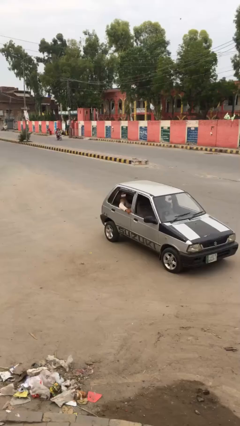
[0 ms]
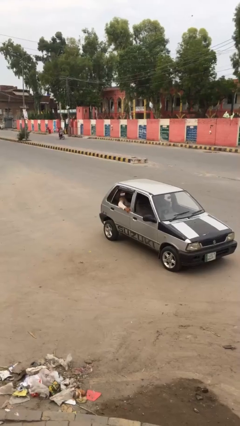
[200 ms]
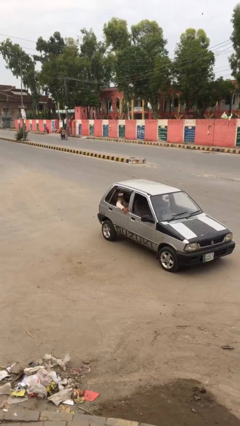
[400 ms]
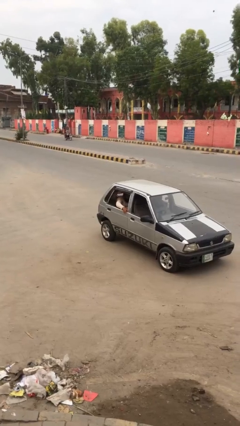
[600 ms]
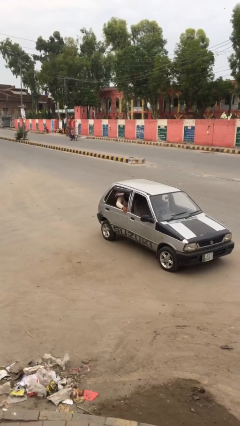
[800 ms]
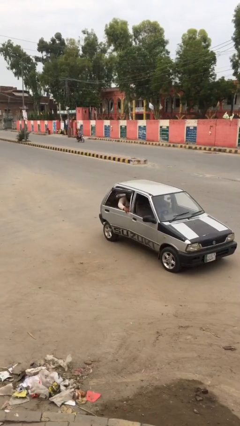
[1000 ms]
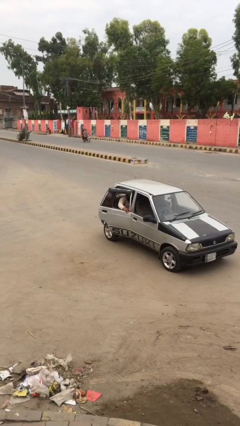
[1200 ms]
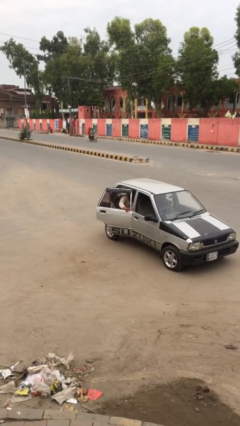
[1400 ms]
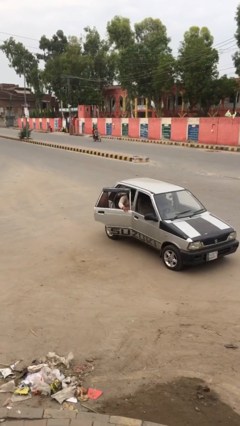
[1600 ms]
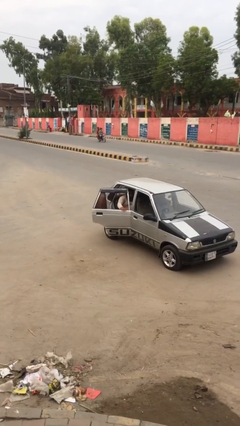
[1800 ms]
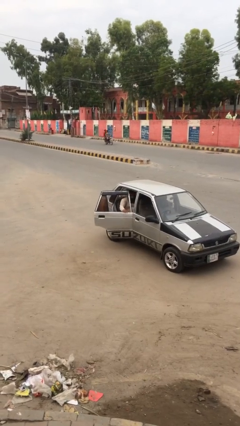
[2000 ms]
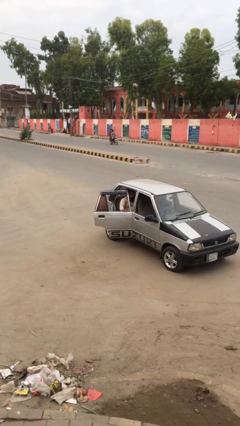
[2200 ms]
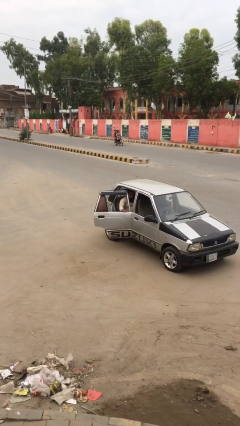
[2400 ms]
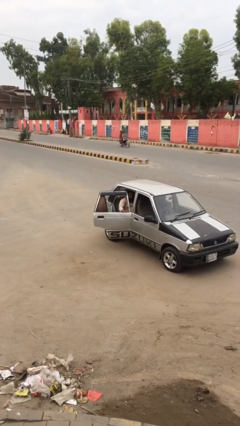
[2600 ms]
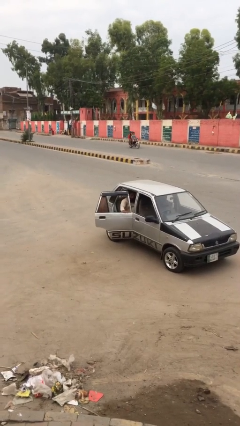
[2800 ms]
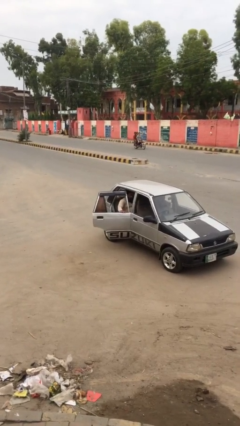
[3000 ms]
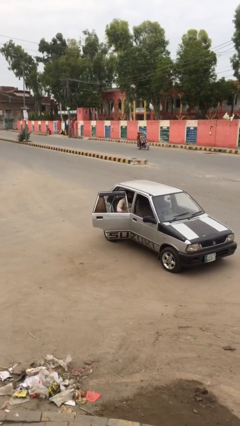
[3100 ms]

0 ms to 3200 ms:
person opens car door

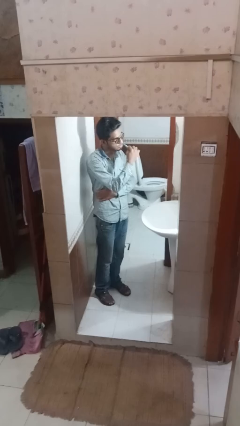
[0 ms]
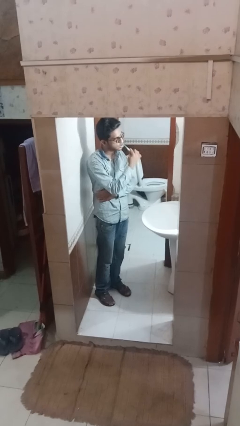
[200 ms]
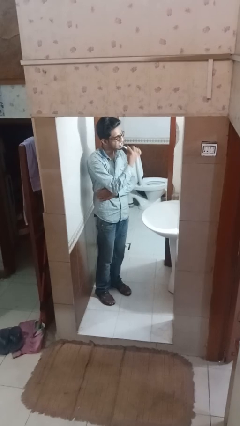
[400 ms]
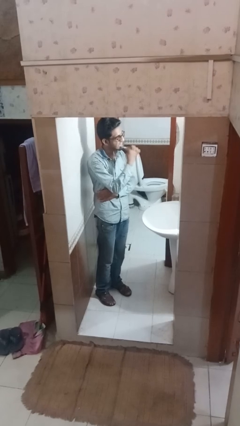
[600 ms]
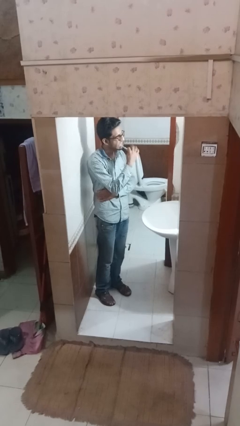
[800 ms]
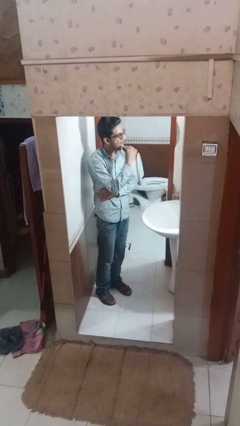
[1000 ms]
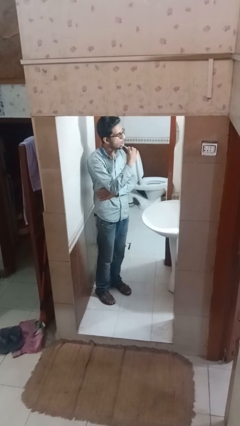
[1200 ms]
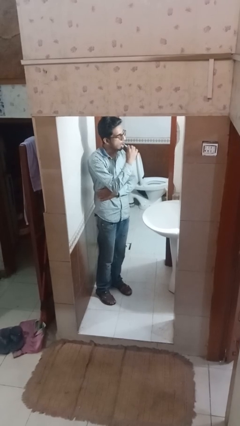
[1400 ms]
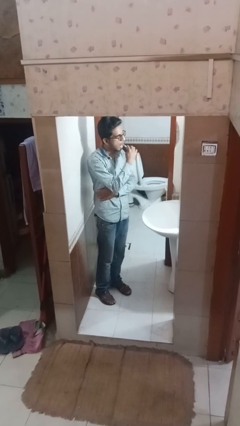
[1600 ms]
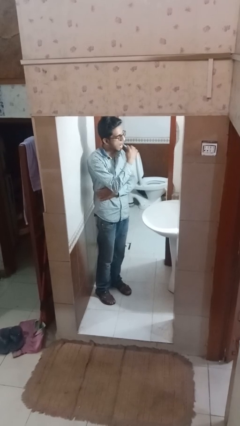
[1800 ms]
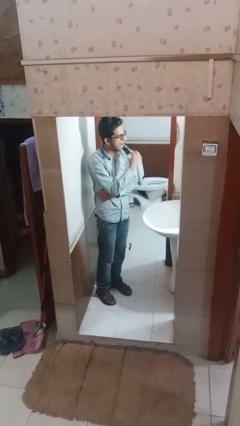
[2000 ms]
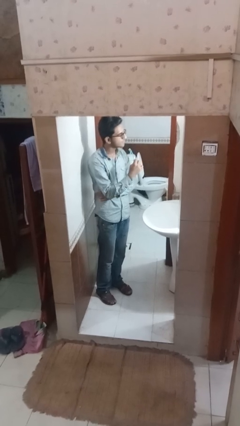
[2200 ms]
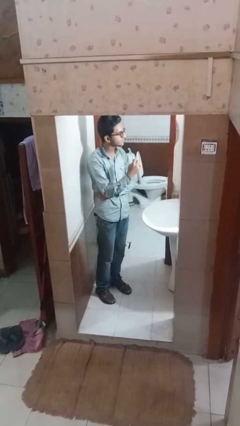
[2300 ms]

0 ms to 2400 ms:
person brushes teeth

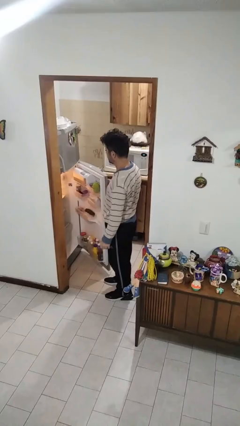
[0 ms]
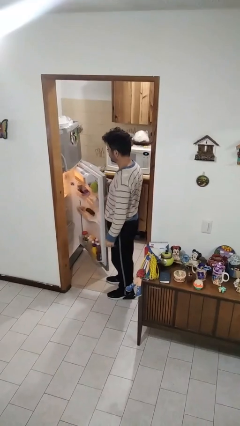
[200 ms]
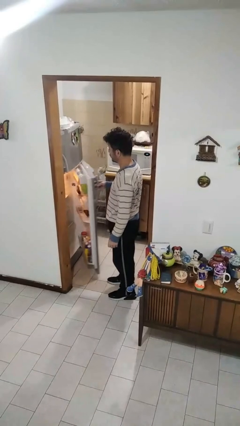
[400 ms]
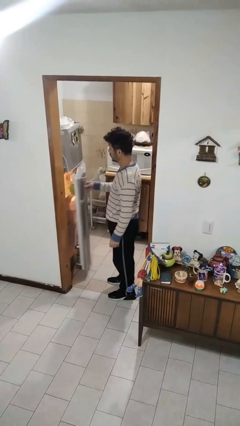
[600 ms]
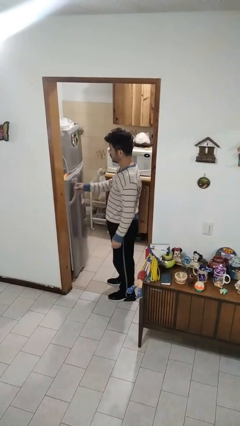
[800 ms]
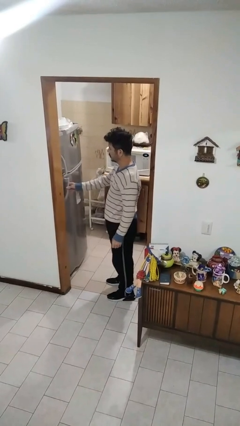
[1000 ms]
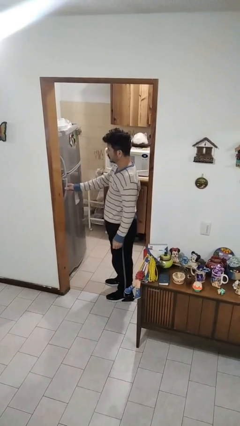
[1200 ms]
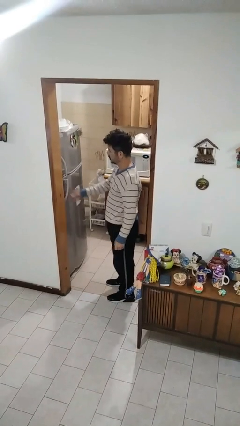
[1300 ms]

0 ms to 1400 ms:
person closes refrigerator

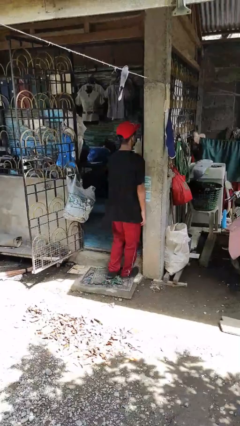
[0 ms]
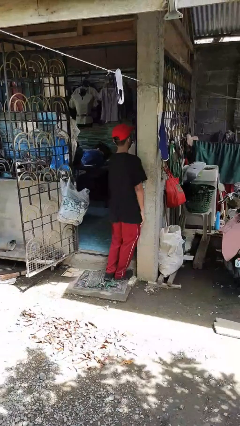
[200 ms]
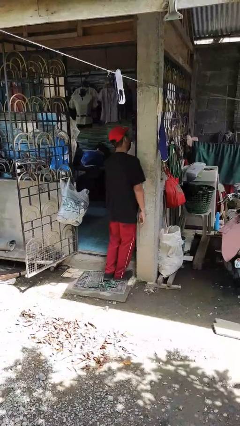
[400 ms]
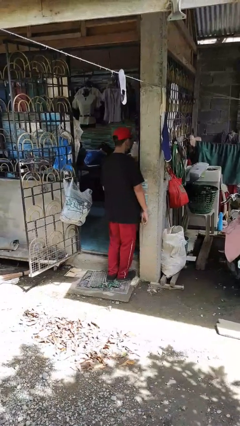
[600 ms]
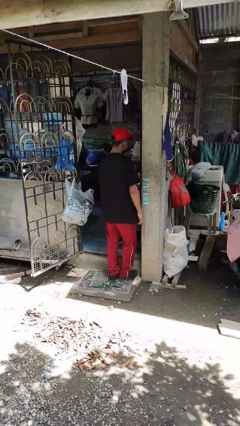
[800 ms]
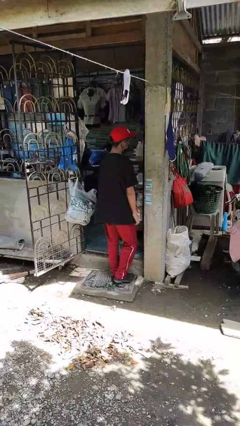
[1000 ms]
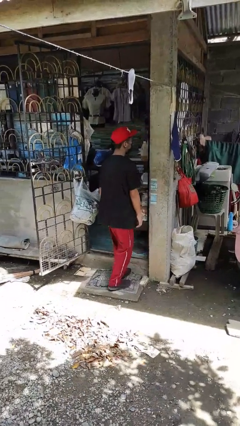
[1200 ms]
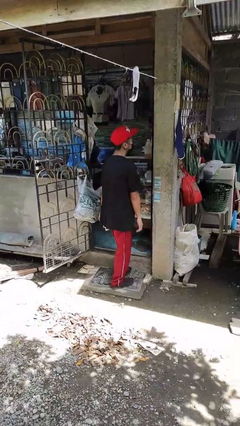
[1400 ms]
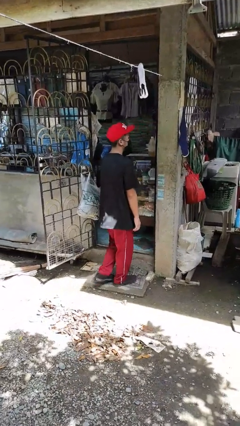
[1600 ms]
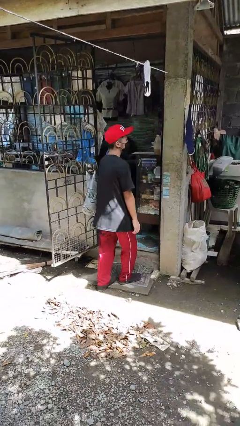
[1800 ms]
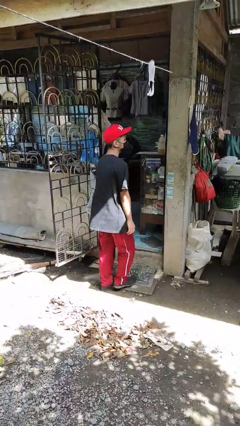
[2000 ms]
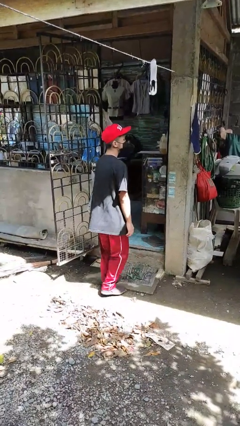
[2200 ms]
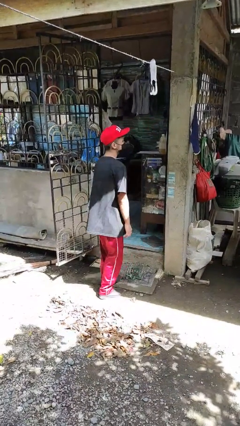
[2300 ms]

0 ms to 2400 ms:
person bumps into wall

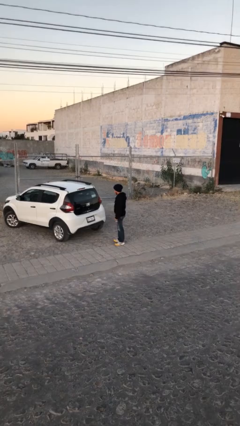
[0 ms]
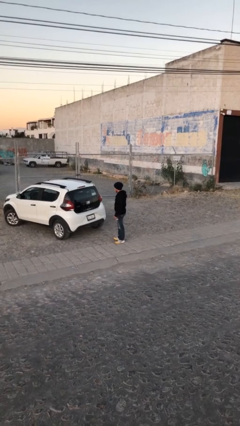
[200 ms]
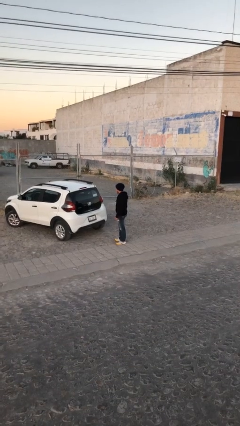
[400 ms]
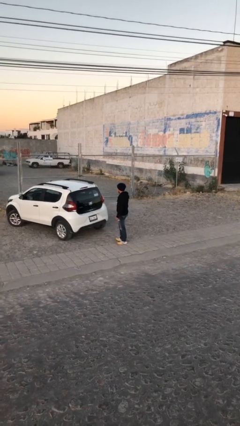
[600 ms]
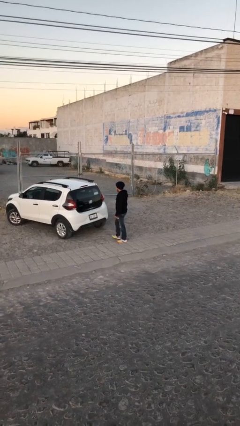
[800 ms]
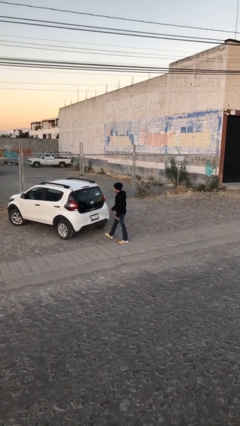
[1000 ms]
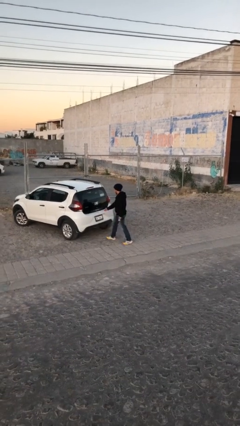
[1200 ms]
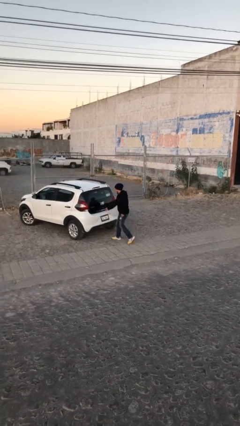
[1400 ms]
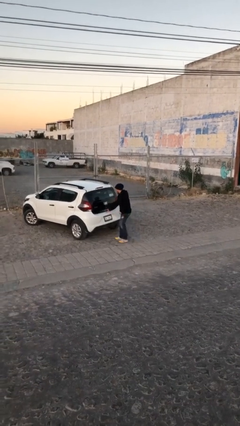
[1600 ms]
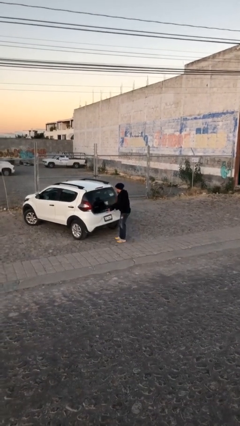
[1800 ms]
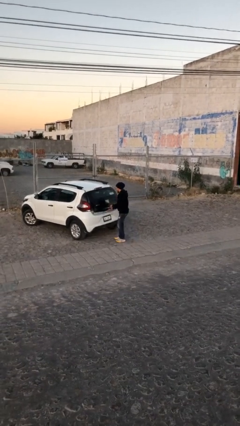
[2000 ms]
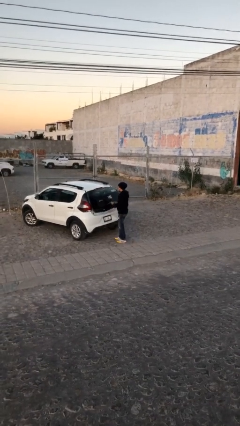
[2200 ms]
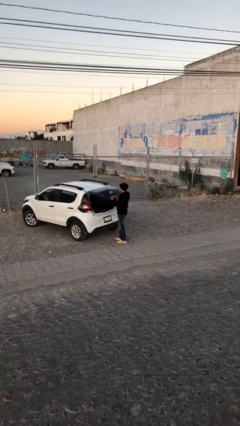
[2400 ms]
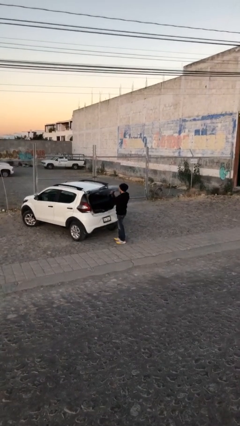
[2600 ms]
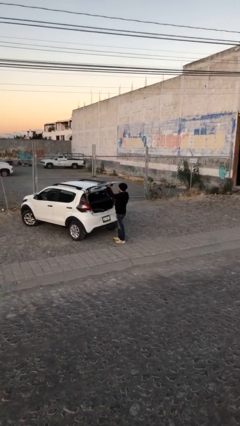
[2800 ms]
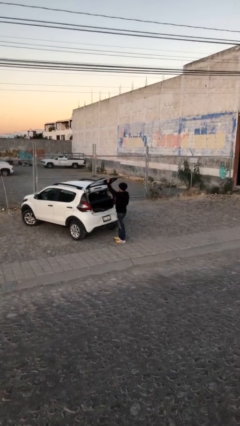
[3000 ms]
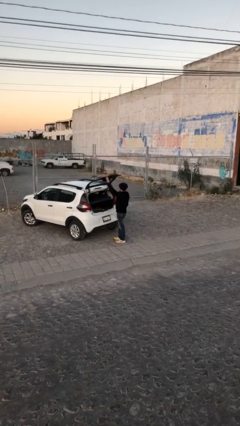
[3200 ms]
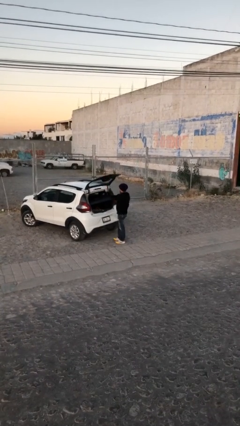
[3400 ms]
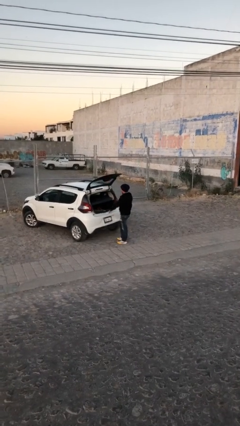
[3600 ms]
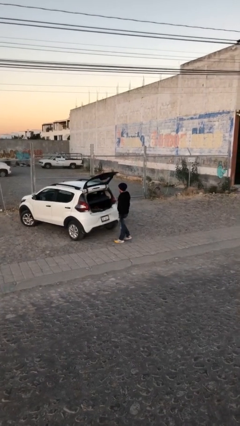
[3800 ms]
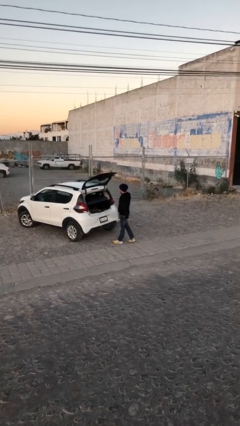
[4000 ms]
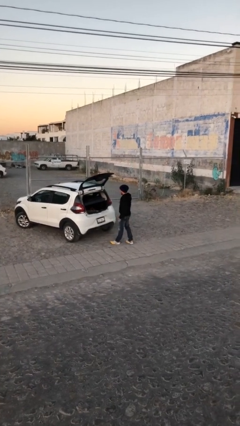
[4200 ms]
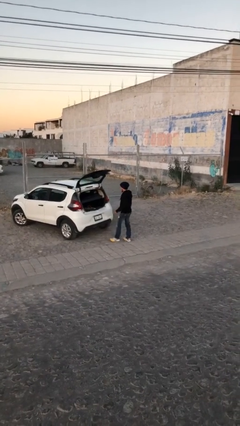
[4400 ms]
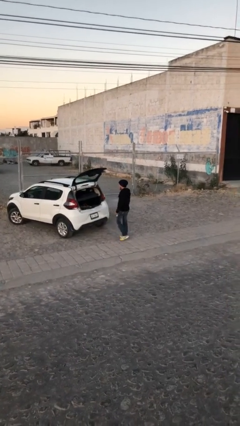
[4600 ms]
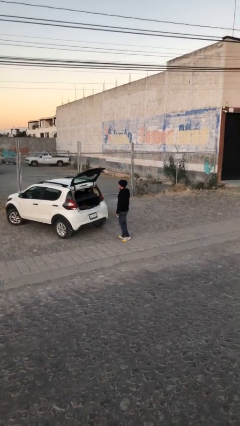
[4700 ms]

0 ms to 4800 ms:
person opens car trunk

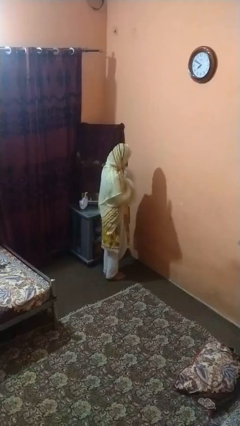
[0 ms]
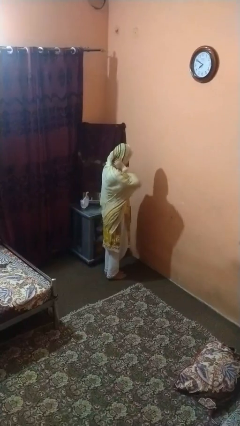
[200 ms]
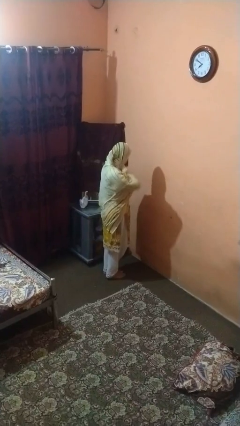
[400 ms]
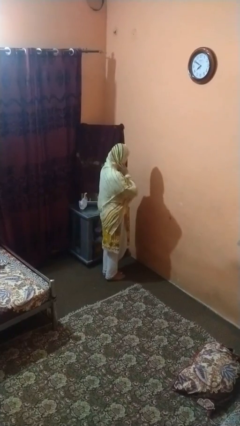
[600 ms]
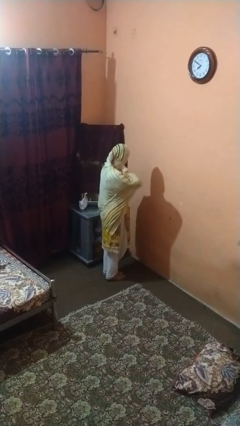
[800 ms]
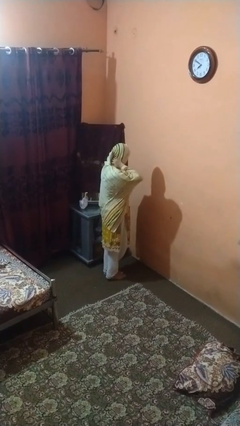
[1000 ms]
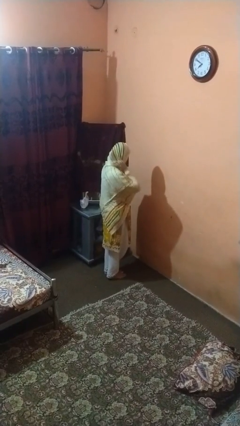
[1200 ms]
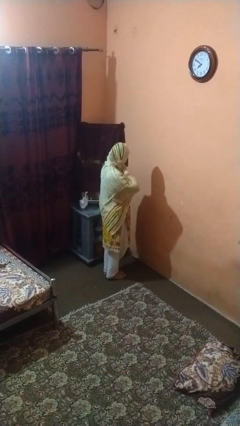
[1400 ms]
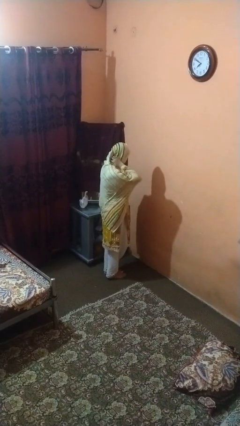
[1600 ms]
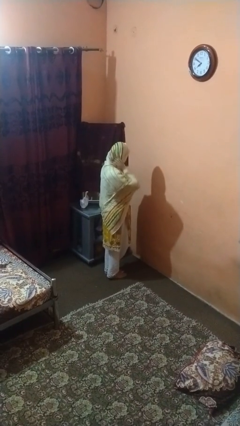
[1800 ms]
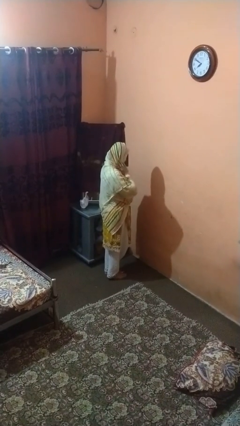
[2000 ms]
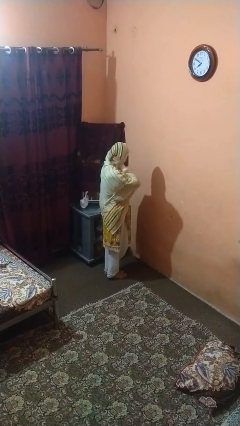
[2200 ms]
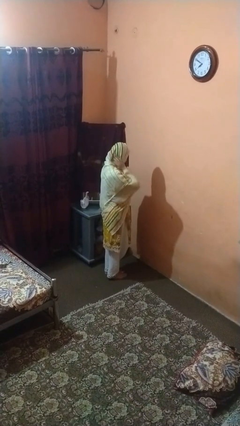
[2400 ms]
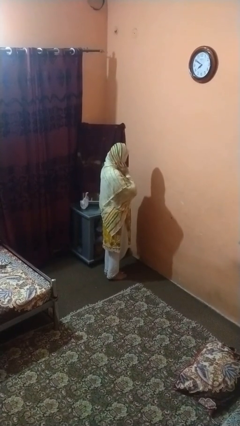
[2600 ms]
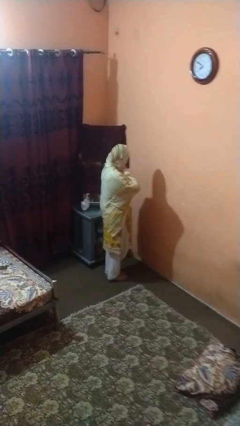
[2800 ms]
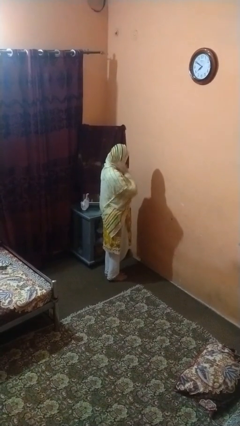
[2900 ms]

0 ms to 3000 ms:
person rubs neck

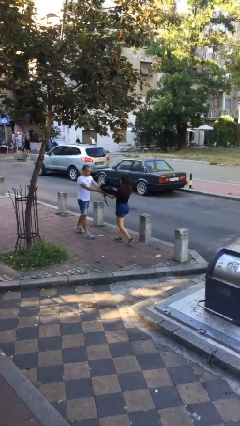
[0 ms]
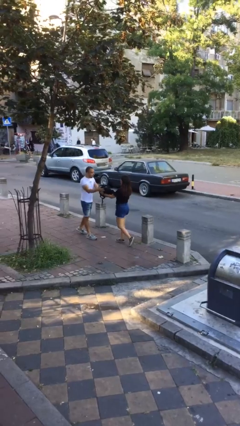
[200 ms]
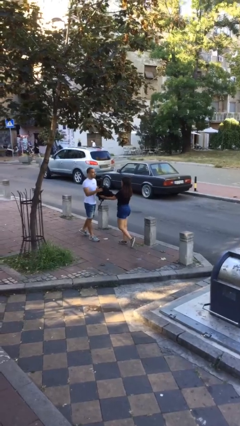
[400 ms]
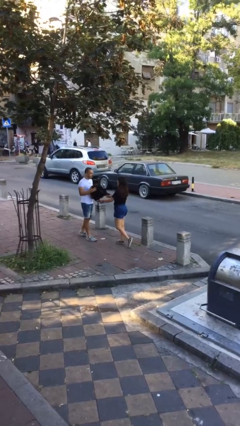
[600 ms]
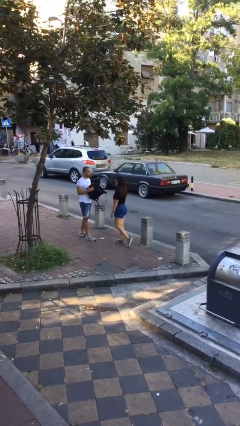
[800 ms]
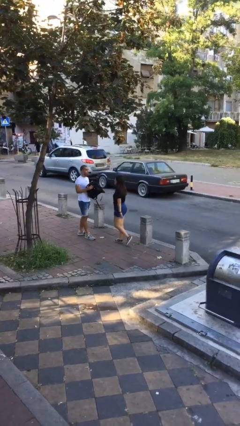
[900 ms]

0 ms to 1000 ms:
person transfers object to person
